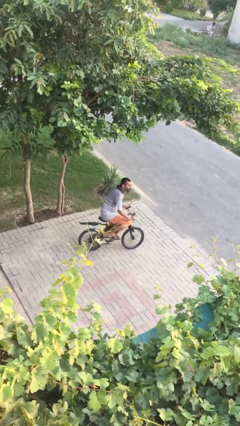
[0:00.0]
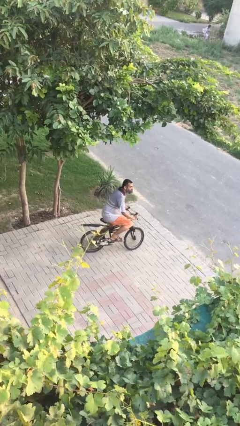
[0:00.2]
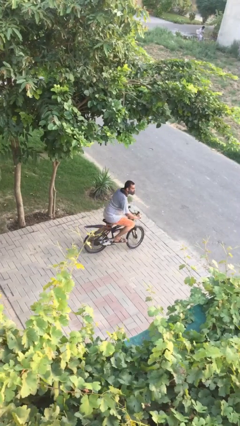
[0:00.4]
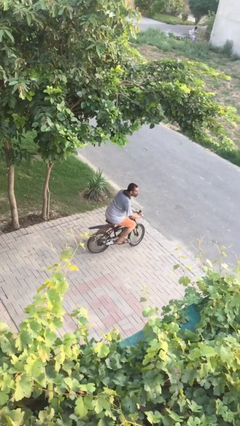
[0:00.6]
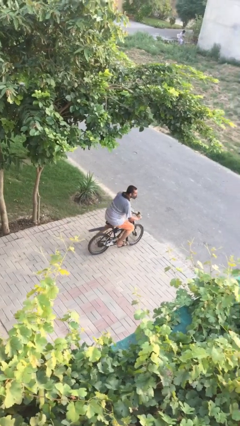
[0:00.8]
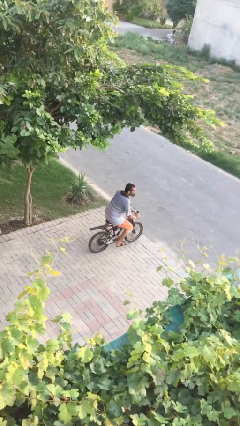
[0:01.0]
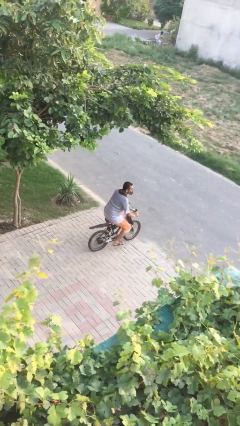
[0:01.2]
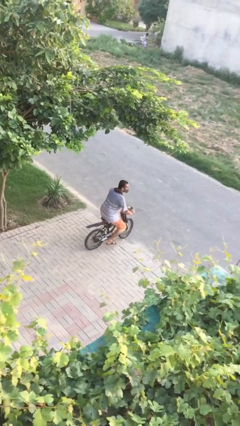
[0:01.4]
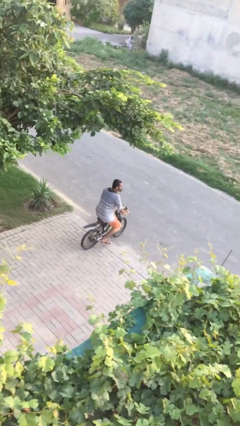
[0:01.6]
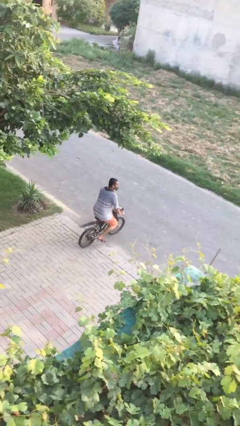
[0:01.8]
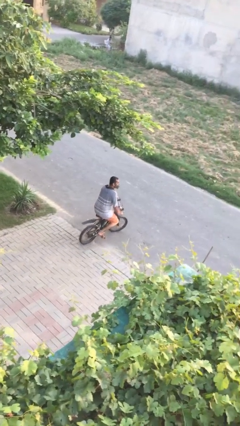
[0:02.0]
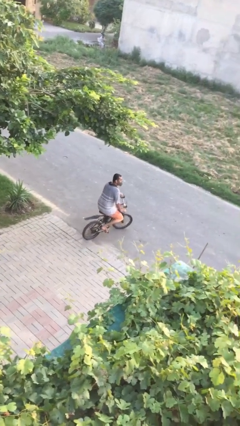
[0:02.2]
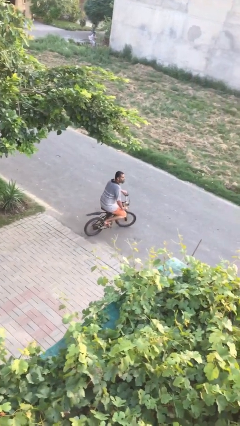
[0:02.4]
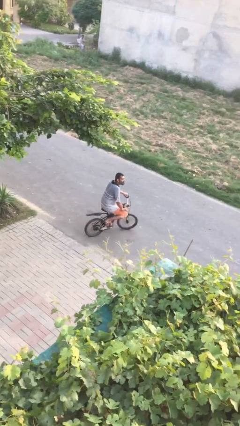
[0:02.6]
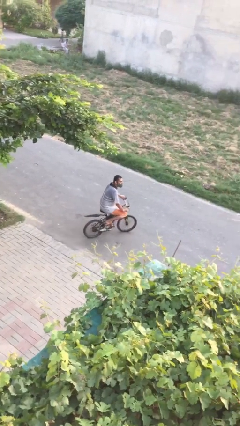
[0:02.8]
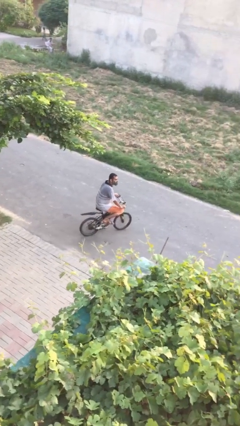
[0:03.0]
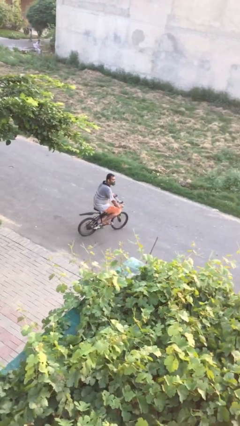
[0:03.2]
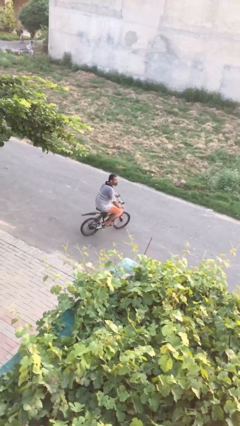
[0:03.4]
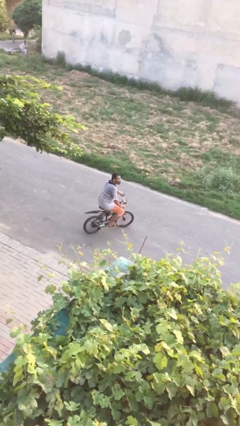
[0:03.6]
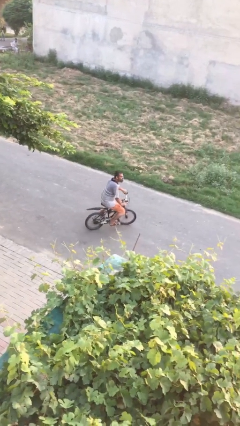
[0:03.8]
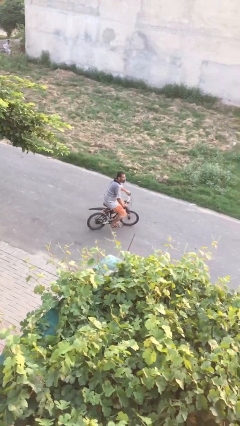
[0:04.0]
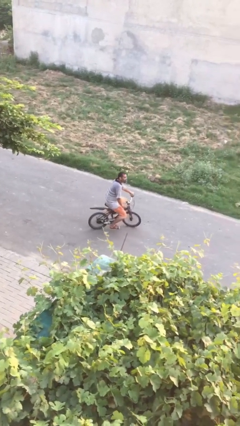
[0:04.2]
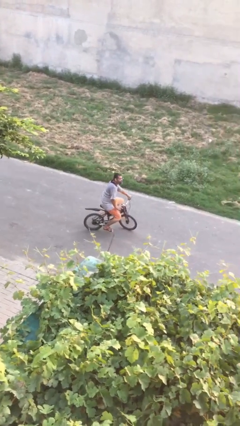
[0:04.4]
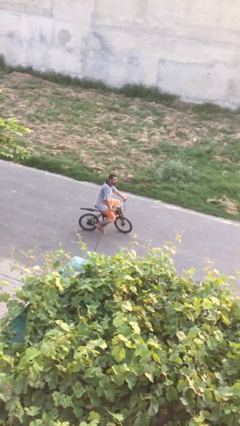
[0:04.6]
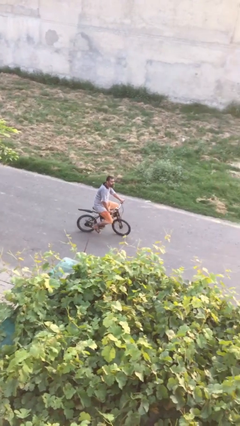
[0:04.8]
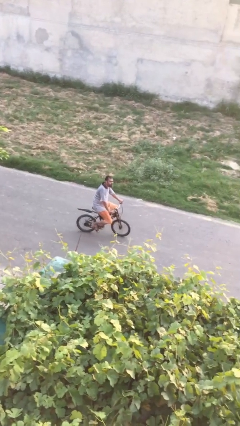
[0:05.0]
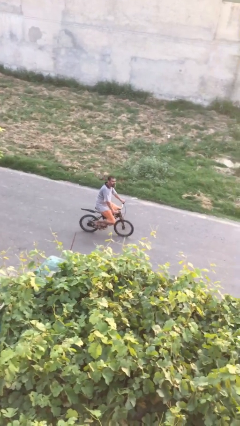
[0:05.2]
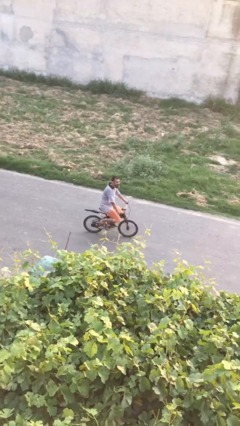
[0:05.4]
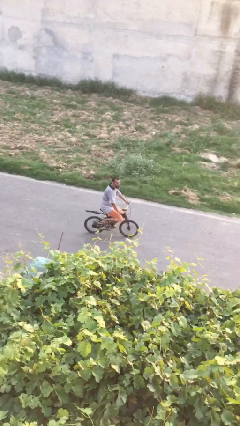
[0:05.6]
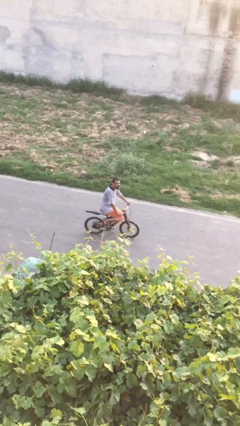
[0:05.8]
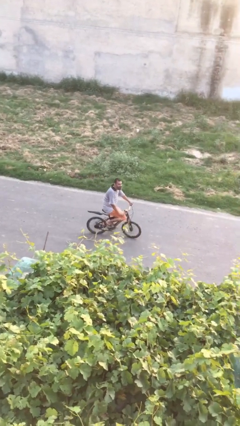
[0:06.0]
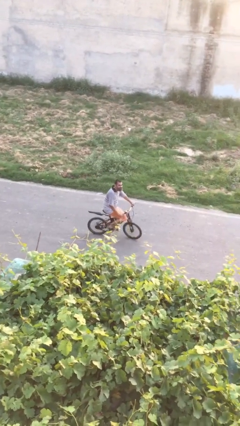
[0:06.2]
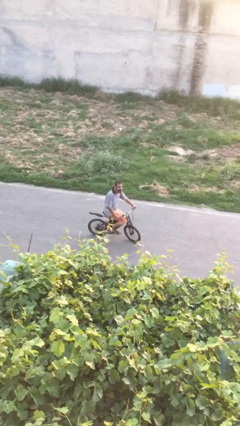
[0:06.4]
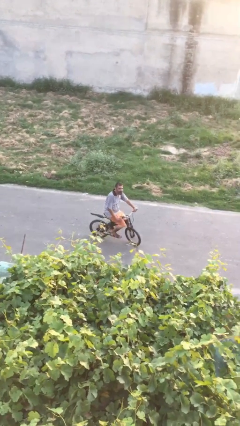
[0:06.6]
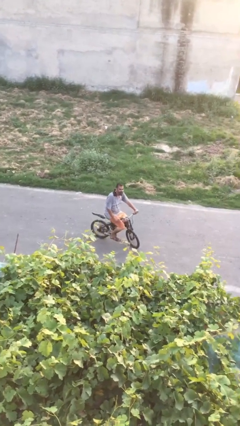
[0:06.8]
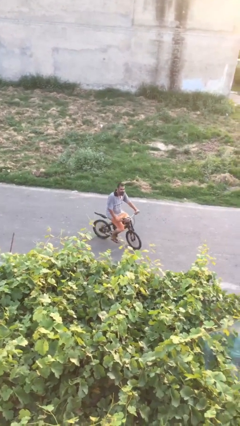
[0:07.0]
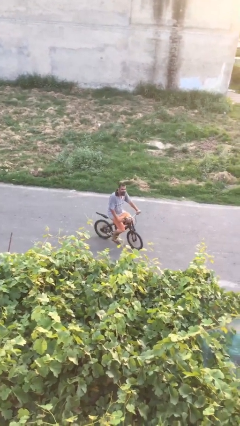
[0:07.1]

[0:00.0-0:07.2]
person rides bicycle

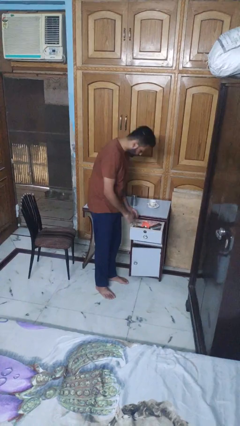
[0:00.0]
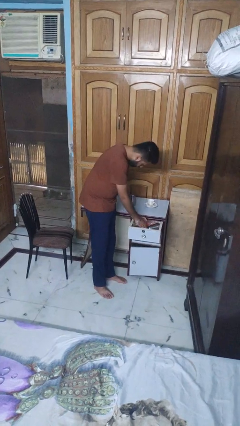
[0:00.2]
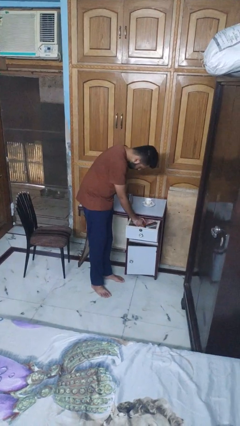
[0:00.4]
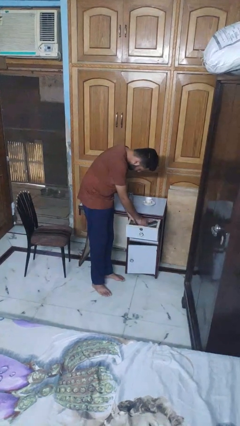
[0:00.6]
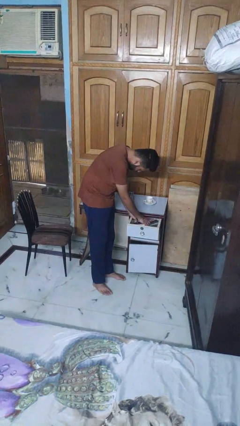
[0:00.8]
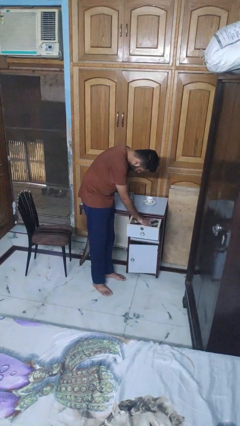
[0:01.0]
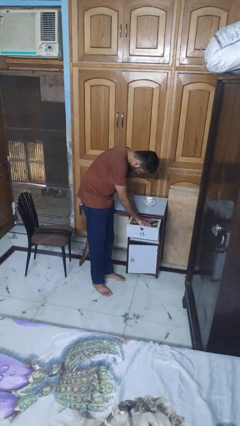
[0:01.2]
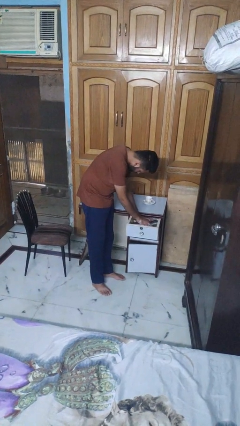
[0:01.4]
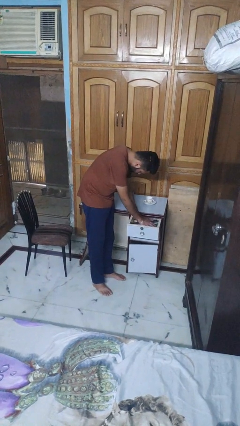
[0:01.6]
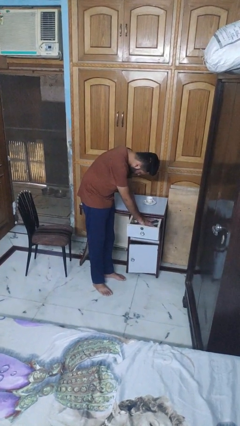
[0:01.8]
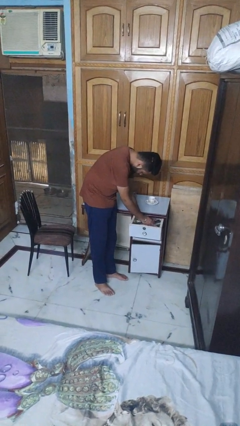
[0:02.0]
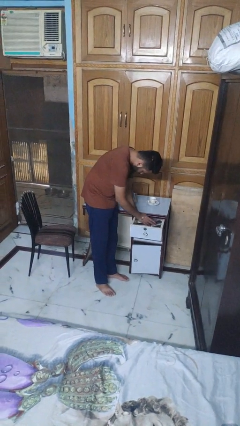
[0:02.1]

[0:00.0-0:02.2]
person searches in kitchen drawer

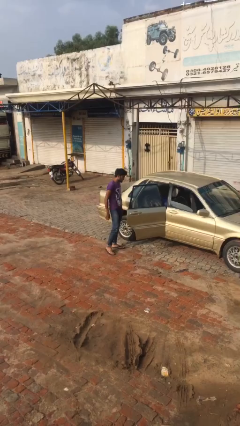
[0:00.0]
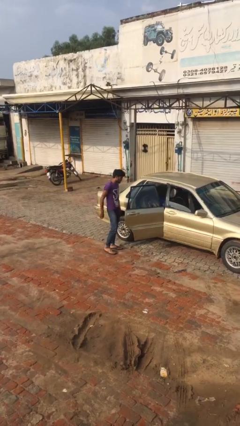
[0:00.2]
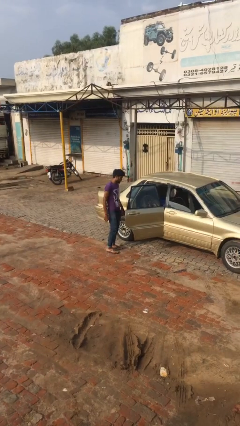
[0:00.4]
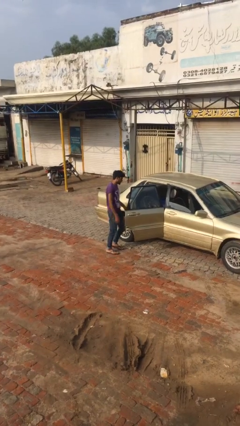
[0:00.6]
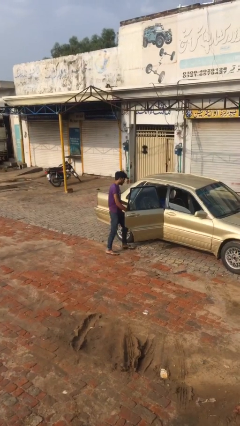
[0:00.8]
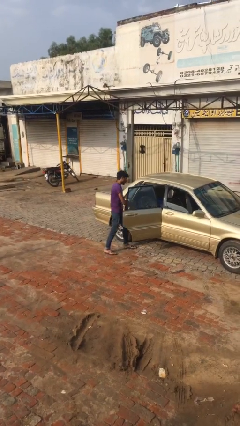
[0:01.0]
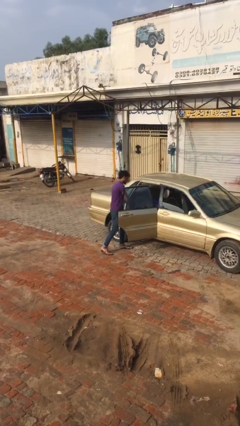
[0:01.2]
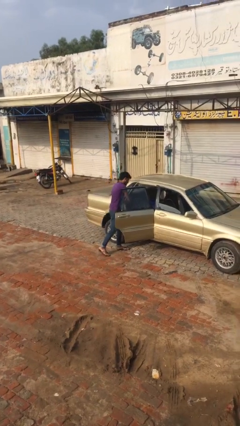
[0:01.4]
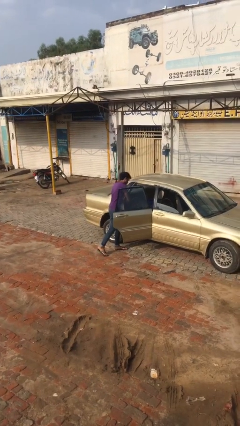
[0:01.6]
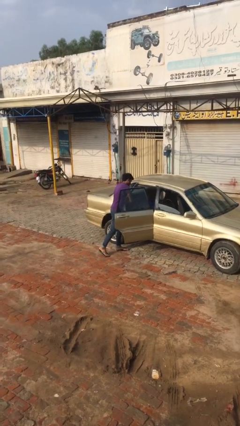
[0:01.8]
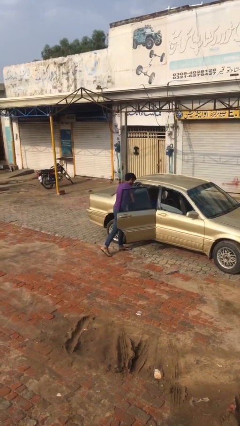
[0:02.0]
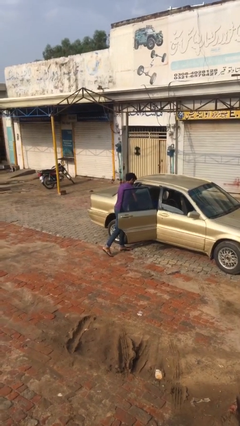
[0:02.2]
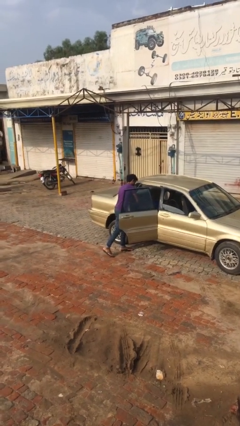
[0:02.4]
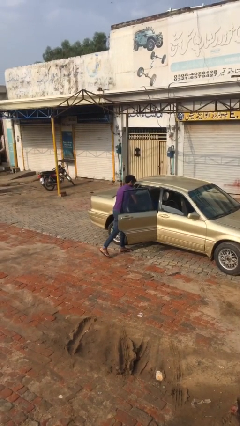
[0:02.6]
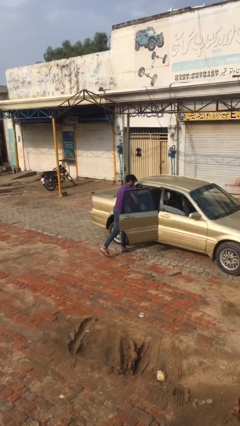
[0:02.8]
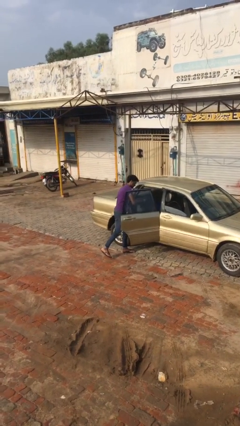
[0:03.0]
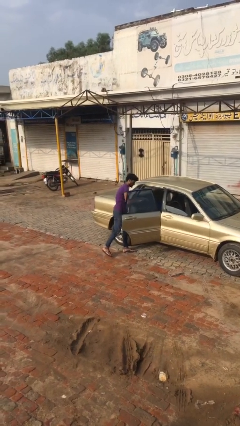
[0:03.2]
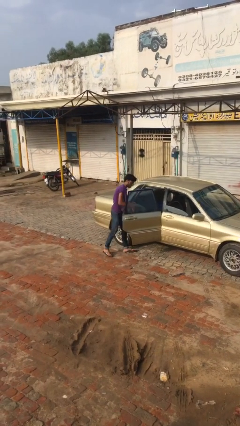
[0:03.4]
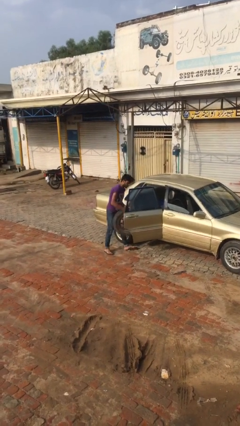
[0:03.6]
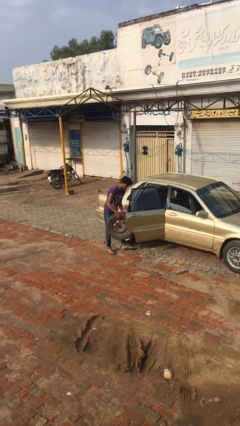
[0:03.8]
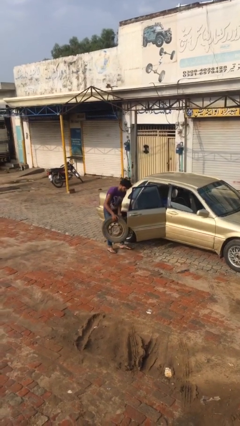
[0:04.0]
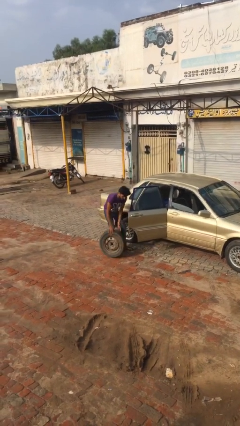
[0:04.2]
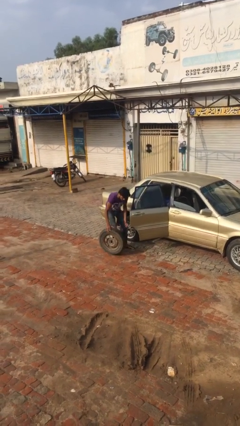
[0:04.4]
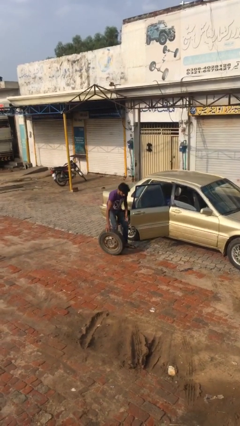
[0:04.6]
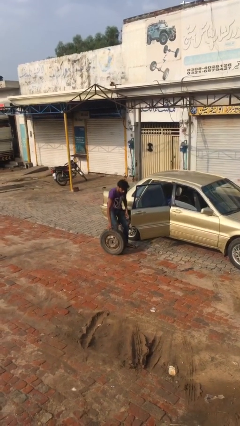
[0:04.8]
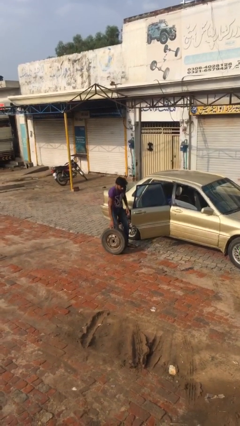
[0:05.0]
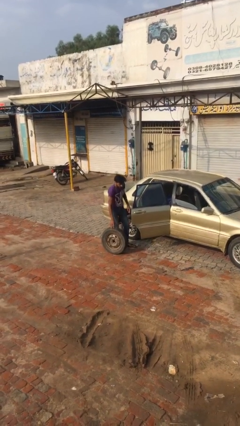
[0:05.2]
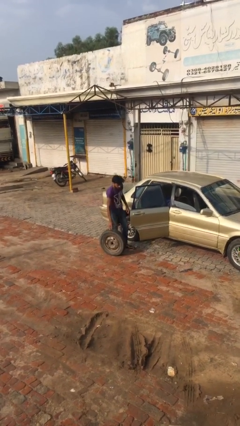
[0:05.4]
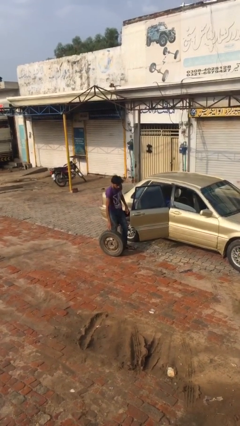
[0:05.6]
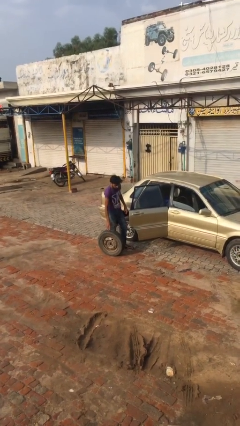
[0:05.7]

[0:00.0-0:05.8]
person unloads car

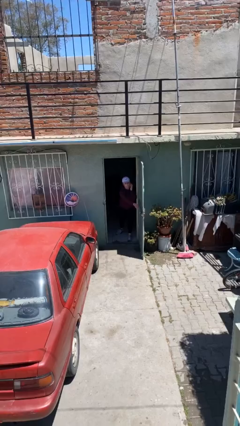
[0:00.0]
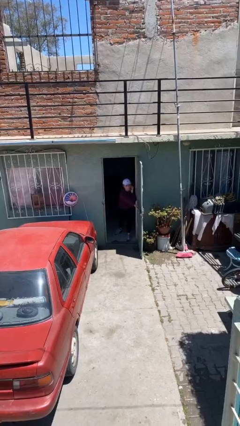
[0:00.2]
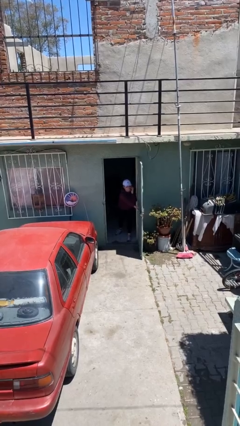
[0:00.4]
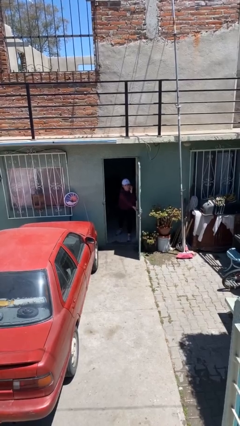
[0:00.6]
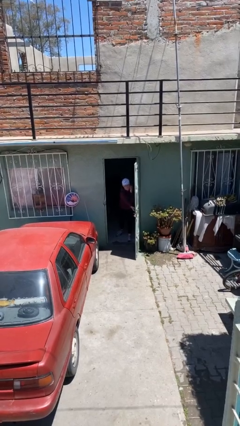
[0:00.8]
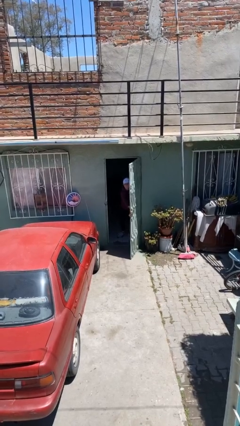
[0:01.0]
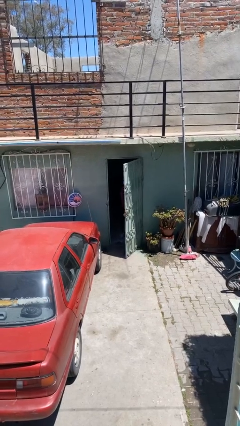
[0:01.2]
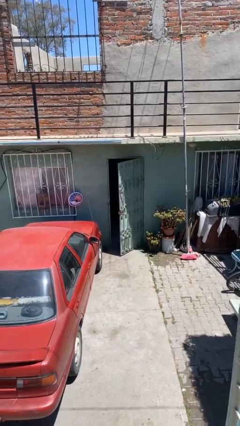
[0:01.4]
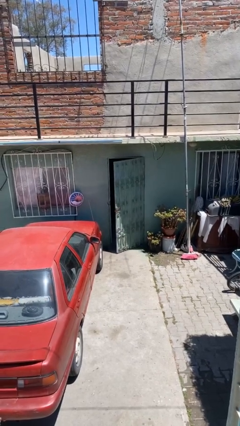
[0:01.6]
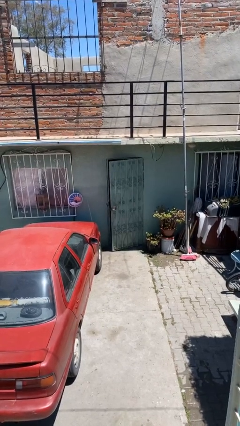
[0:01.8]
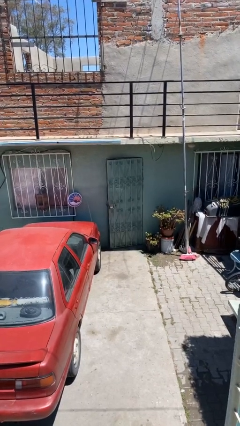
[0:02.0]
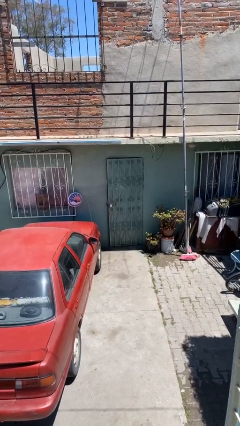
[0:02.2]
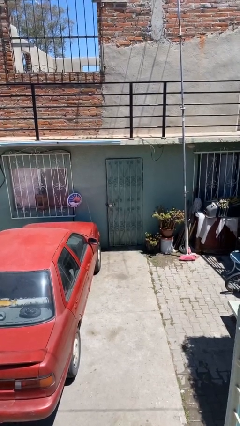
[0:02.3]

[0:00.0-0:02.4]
person closes facility door

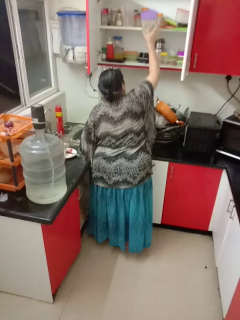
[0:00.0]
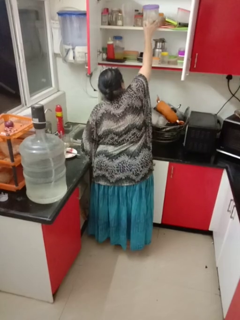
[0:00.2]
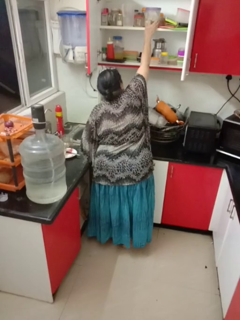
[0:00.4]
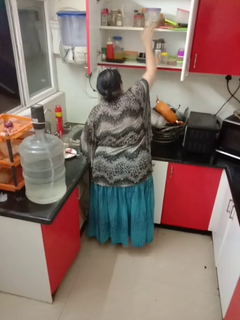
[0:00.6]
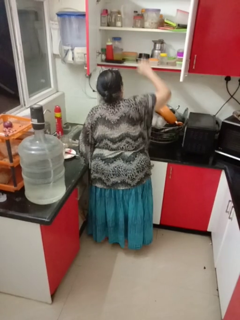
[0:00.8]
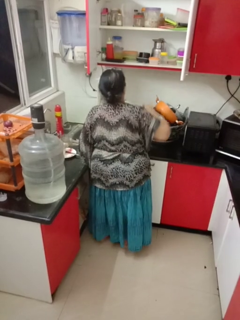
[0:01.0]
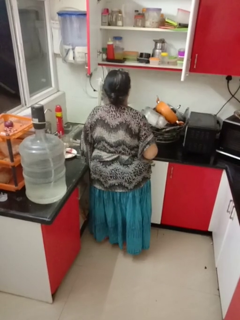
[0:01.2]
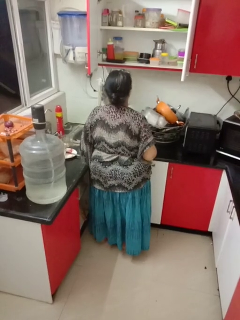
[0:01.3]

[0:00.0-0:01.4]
person puts object in cabinet
